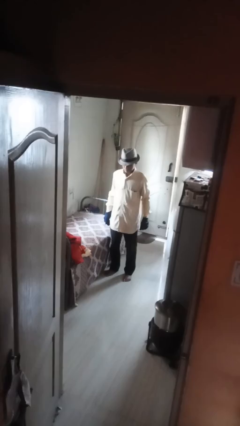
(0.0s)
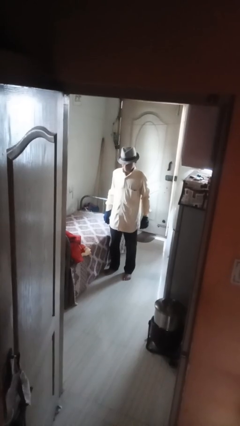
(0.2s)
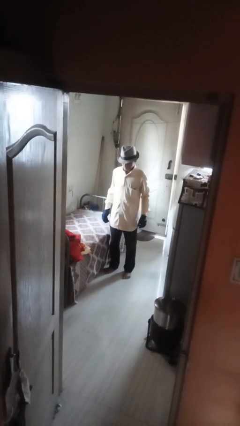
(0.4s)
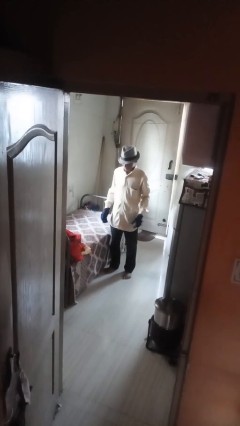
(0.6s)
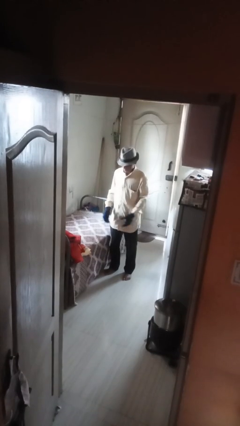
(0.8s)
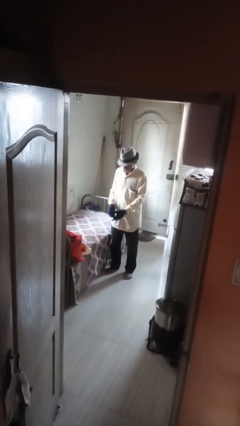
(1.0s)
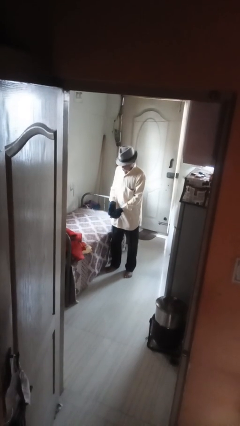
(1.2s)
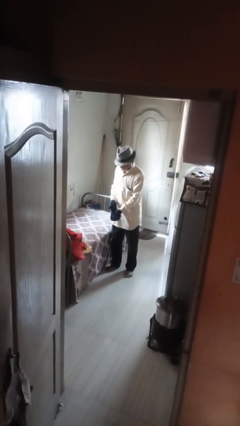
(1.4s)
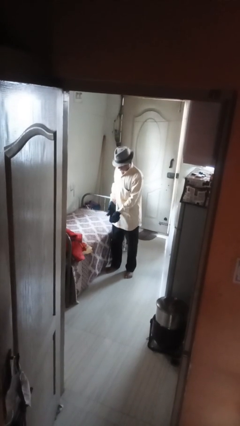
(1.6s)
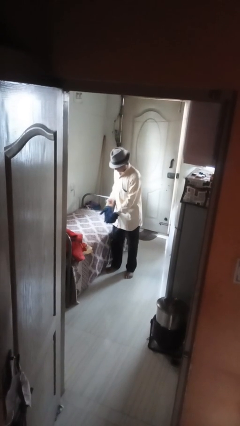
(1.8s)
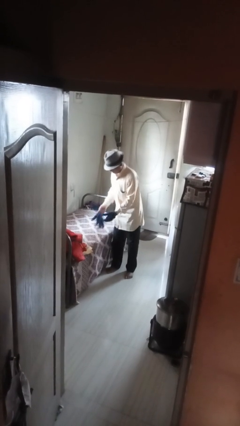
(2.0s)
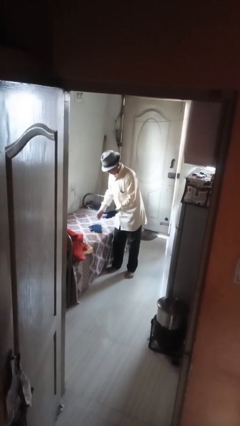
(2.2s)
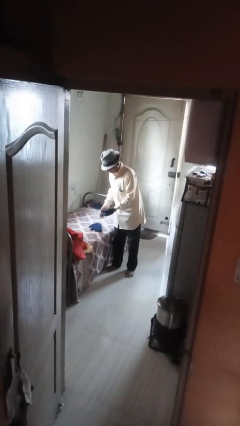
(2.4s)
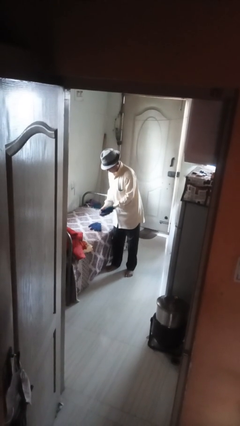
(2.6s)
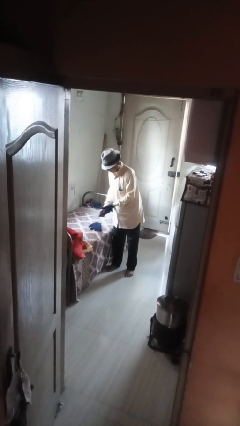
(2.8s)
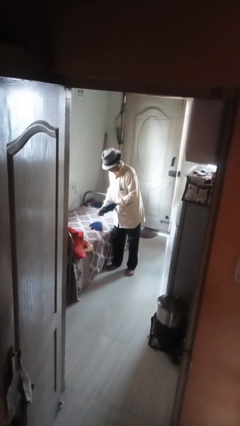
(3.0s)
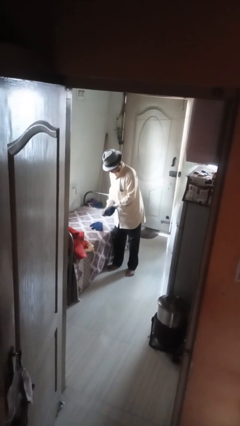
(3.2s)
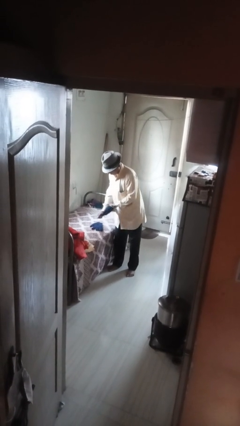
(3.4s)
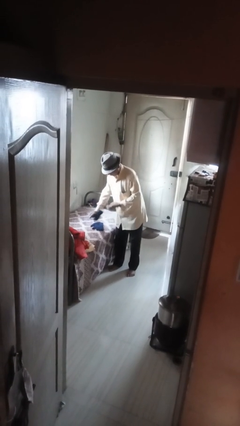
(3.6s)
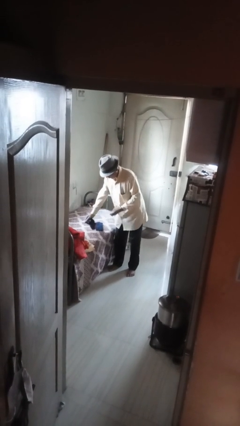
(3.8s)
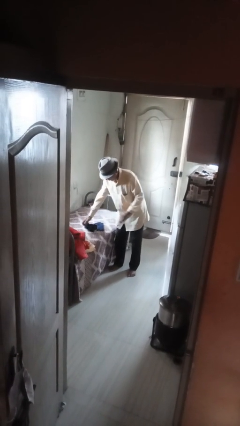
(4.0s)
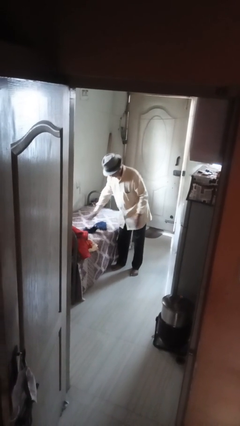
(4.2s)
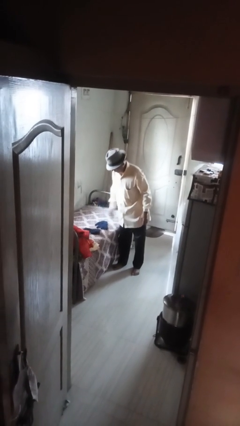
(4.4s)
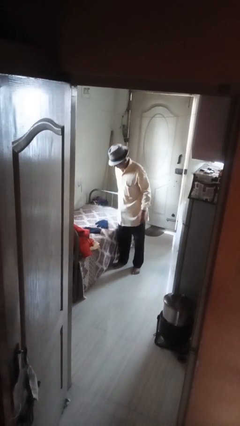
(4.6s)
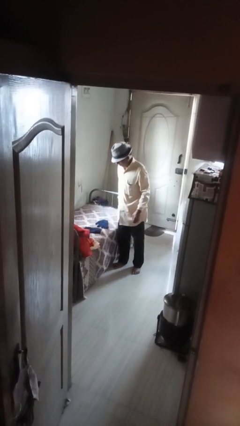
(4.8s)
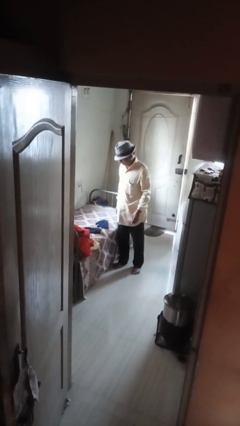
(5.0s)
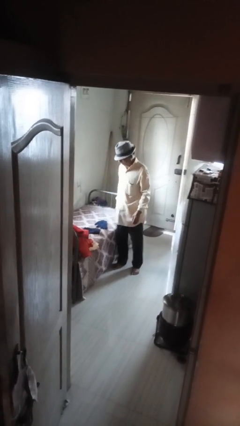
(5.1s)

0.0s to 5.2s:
person takes off gloves

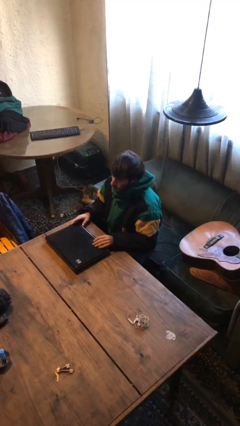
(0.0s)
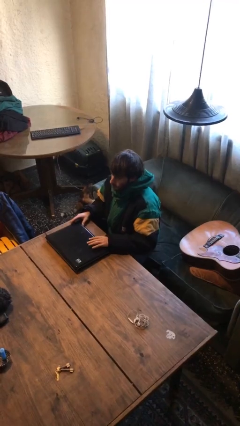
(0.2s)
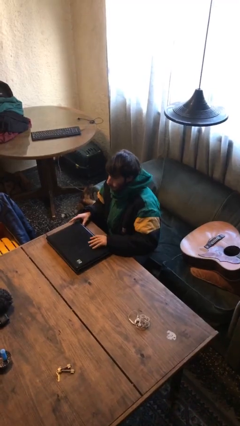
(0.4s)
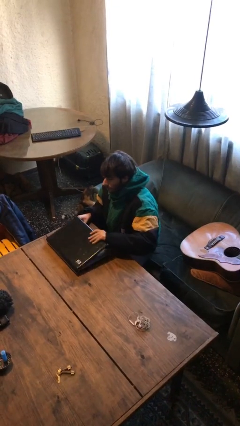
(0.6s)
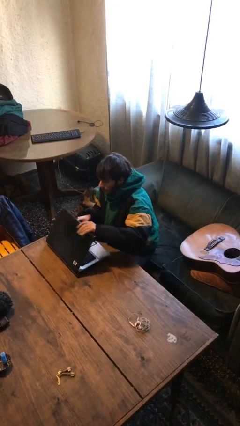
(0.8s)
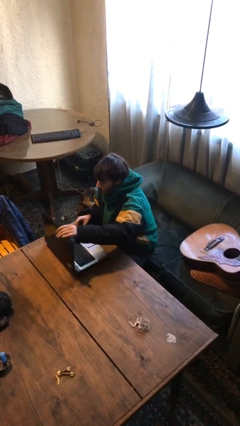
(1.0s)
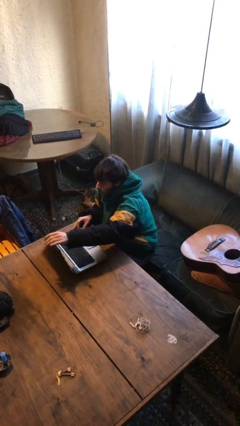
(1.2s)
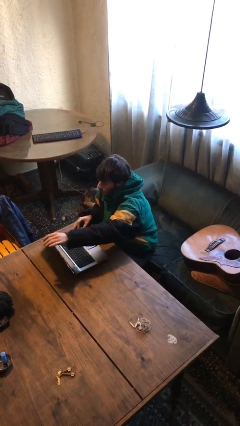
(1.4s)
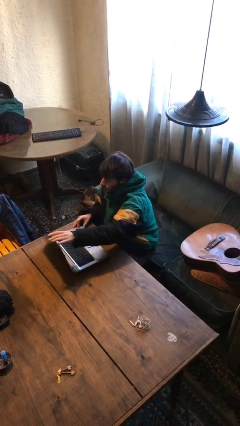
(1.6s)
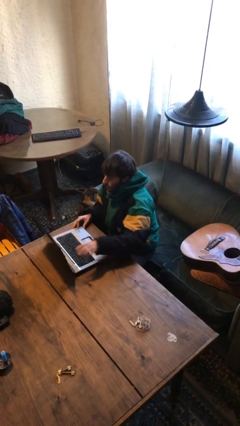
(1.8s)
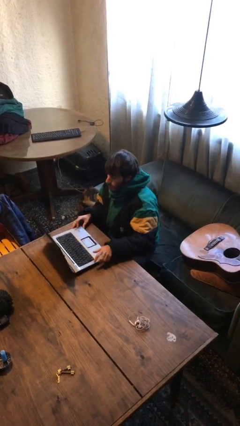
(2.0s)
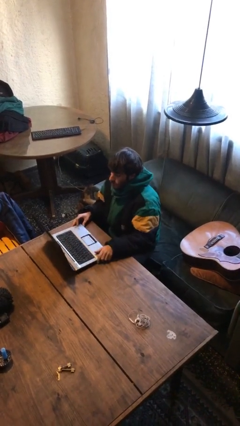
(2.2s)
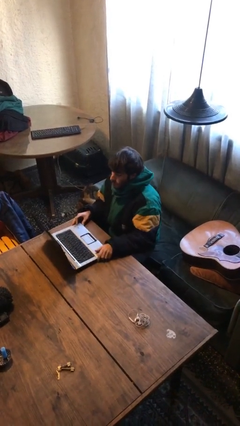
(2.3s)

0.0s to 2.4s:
person opens laptop

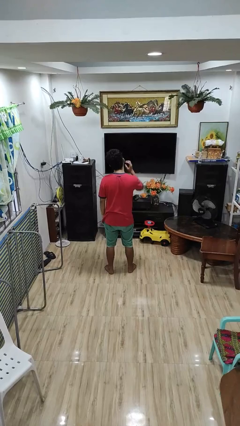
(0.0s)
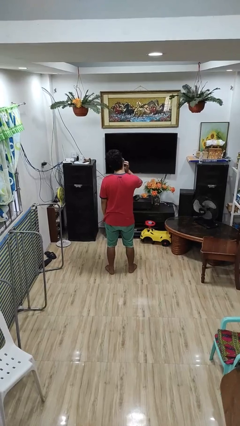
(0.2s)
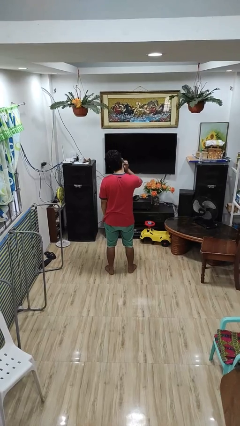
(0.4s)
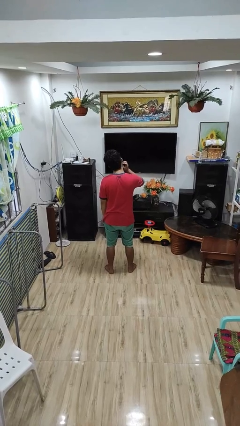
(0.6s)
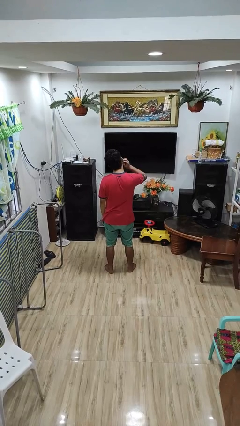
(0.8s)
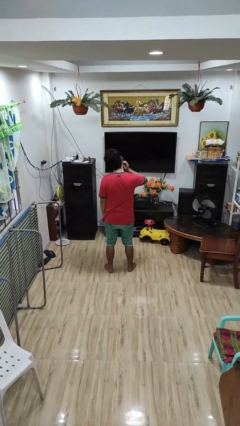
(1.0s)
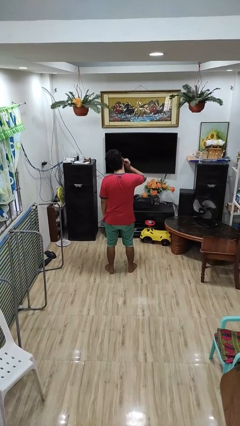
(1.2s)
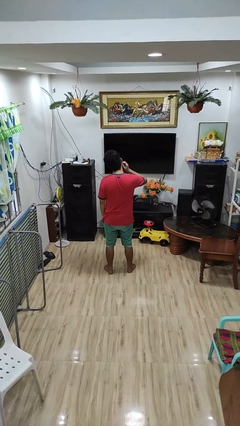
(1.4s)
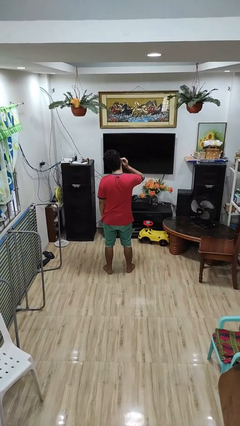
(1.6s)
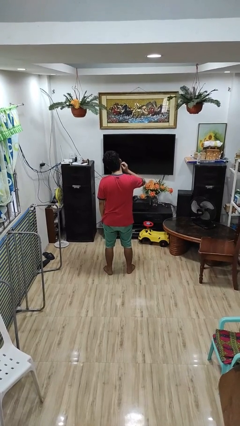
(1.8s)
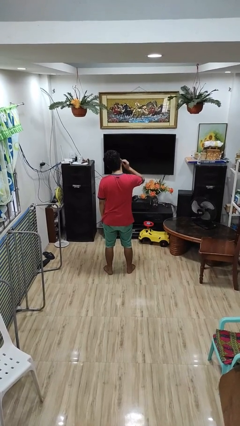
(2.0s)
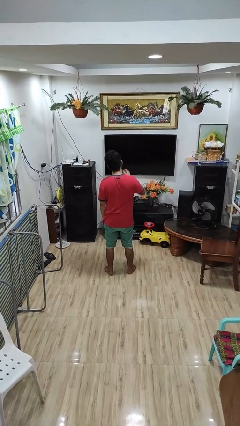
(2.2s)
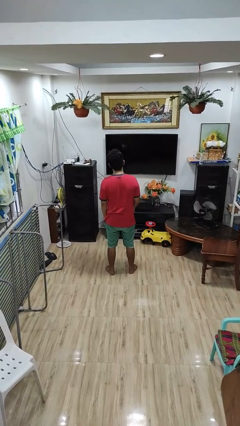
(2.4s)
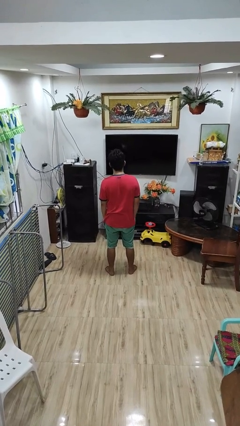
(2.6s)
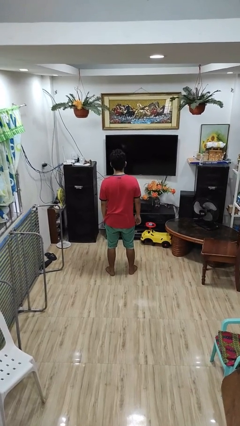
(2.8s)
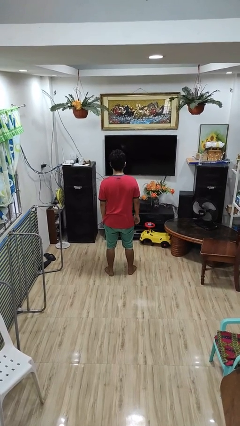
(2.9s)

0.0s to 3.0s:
person scratches face

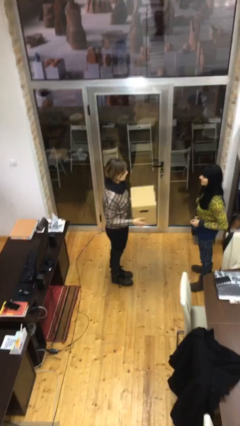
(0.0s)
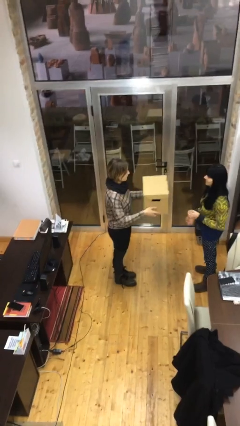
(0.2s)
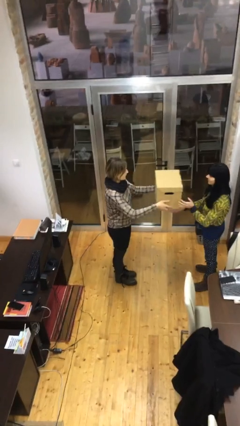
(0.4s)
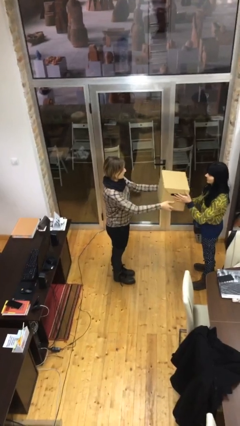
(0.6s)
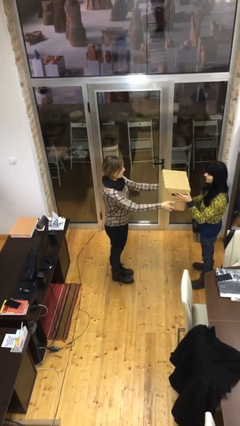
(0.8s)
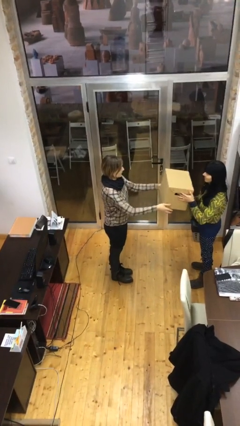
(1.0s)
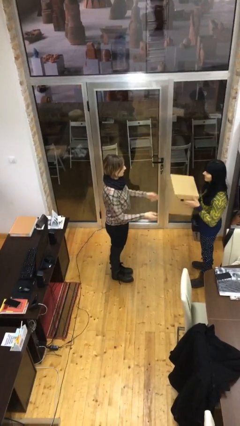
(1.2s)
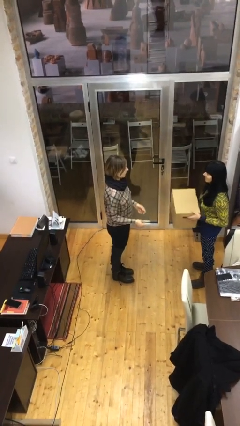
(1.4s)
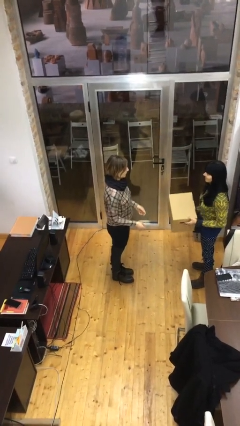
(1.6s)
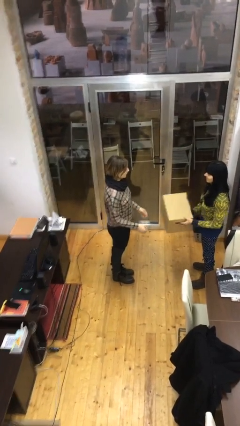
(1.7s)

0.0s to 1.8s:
person transfers object to person

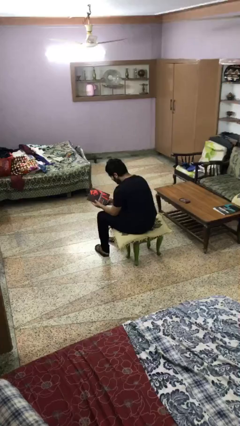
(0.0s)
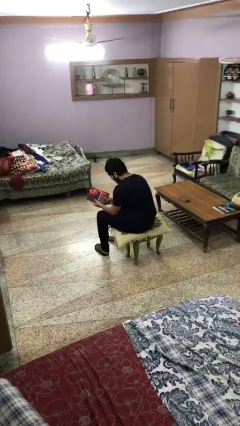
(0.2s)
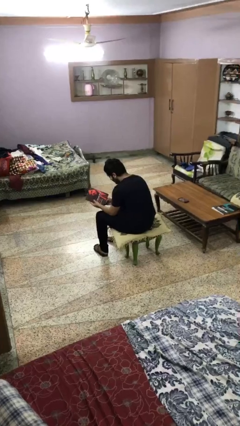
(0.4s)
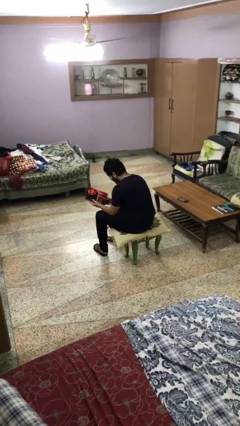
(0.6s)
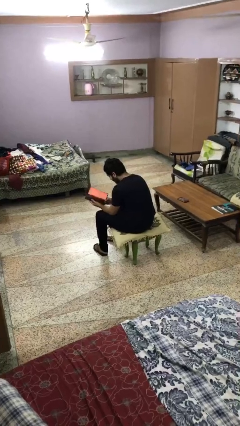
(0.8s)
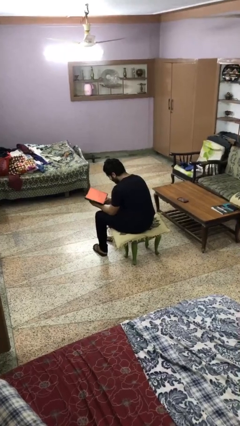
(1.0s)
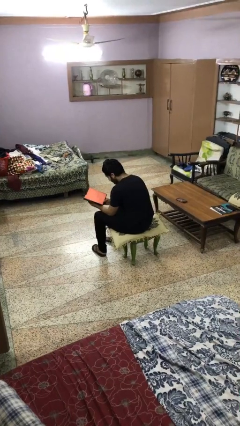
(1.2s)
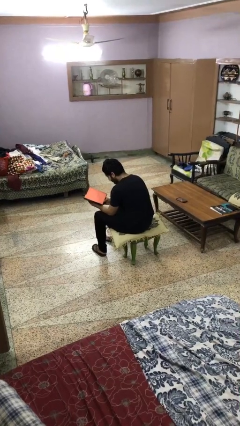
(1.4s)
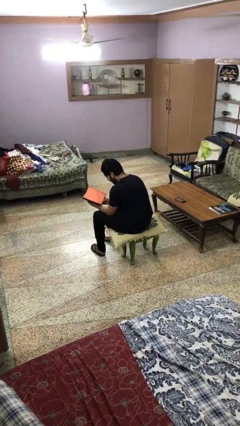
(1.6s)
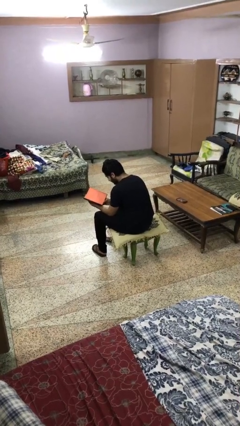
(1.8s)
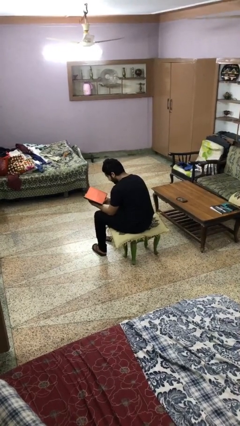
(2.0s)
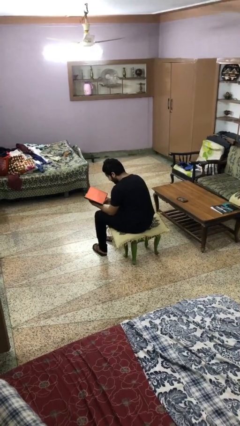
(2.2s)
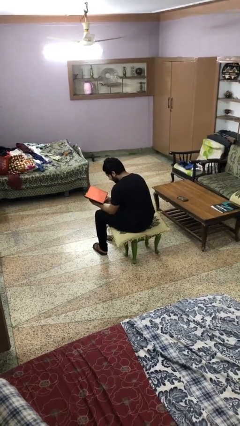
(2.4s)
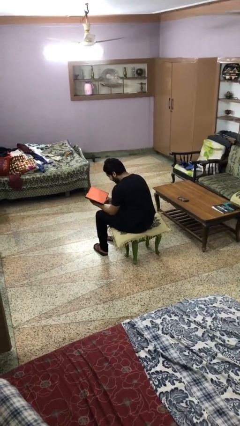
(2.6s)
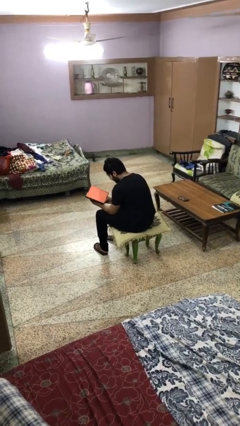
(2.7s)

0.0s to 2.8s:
person reads magazine

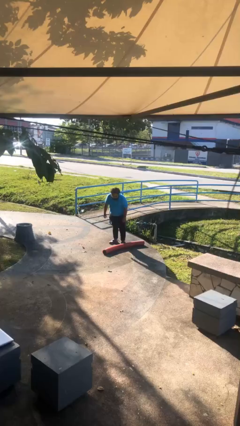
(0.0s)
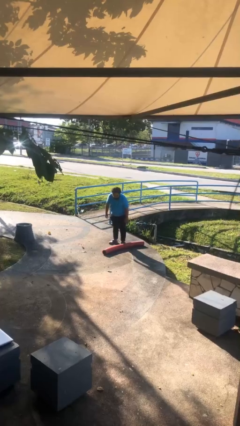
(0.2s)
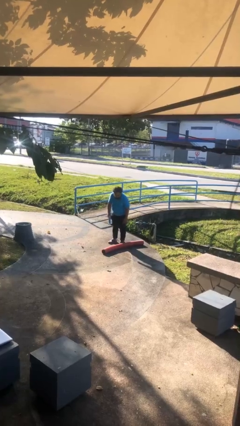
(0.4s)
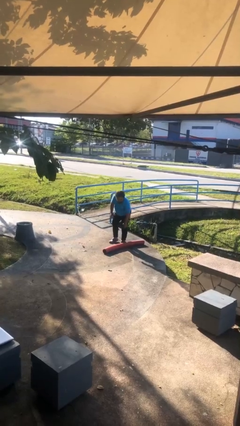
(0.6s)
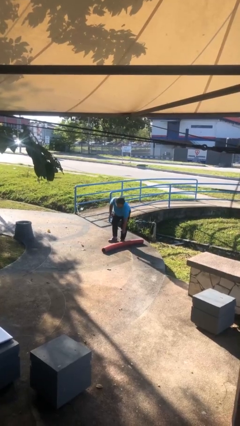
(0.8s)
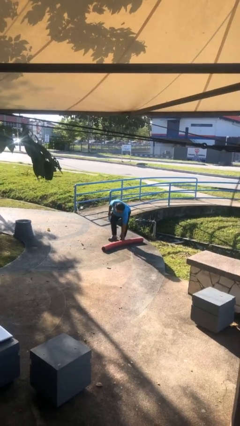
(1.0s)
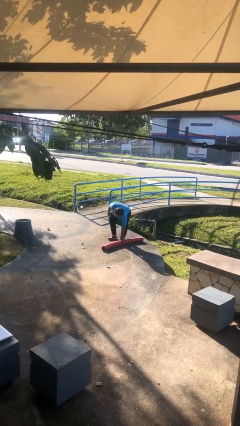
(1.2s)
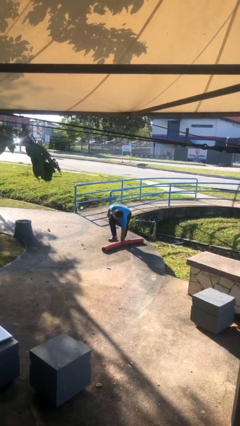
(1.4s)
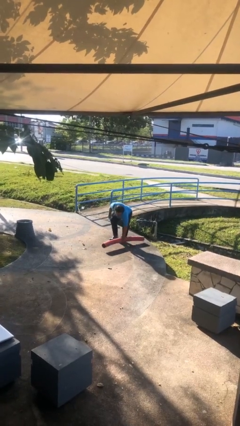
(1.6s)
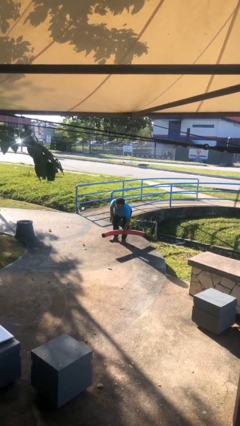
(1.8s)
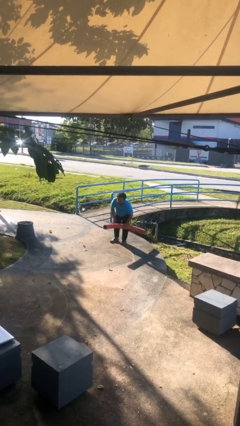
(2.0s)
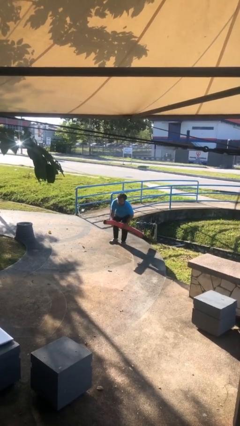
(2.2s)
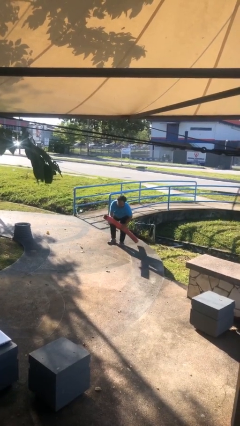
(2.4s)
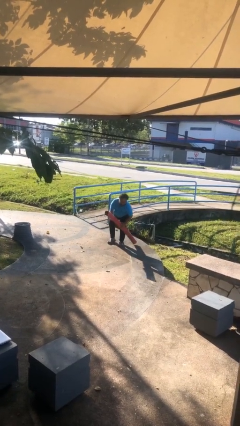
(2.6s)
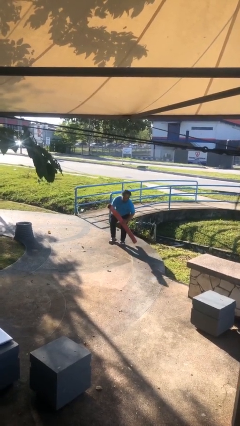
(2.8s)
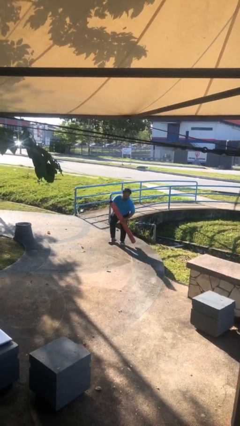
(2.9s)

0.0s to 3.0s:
person picks up object from floor
